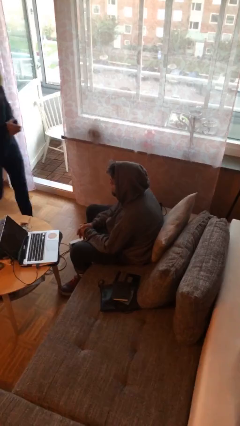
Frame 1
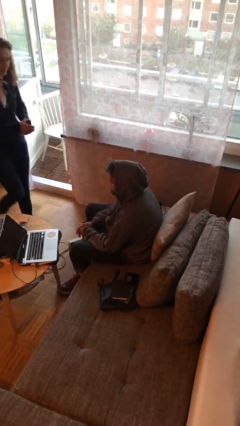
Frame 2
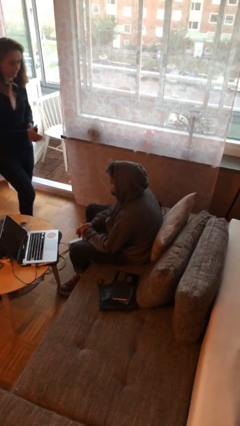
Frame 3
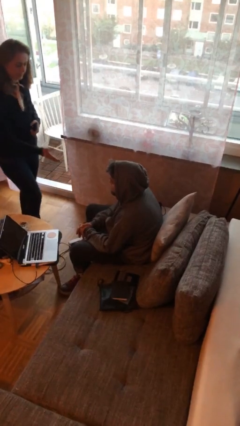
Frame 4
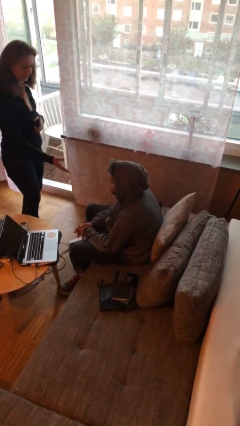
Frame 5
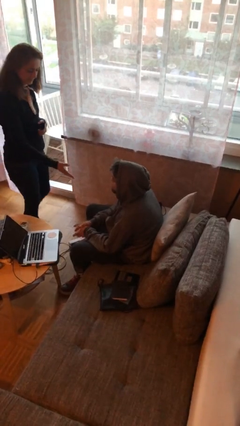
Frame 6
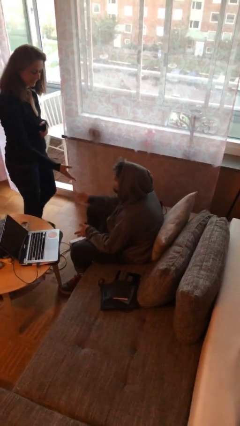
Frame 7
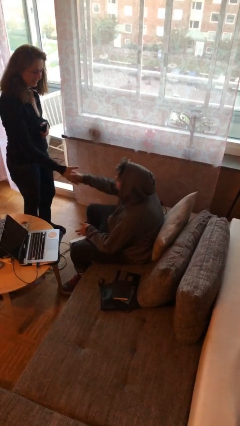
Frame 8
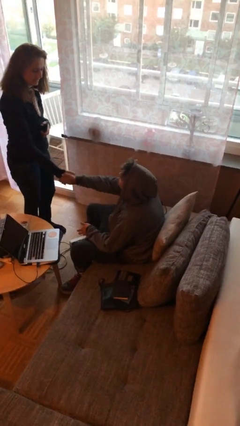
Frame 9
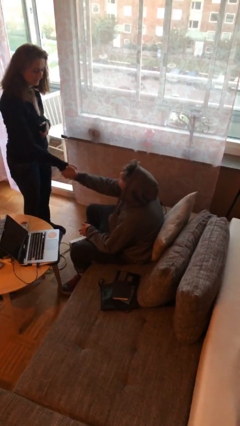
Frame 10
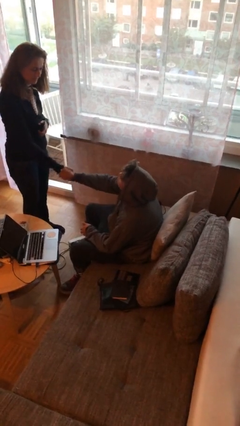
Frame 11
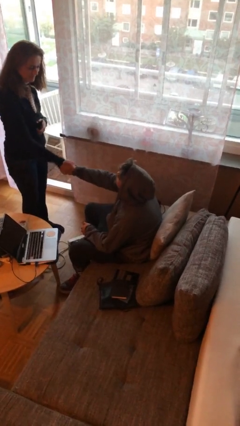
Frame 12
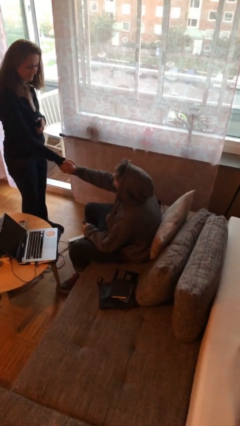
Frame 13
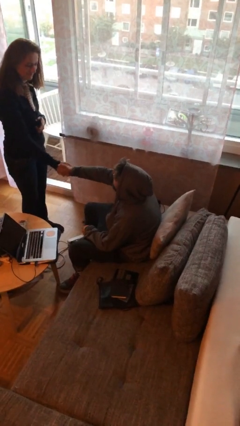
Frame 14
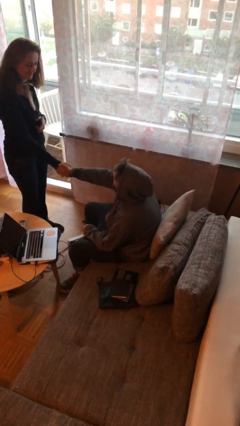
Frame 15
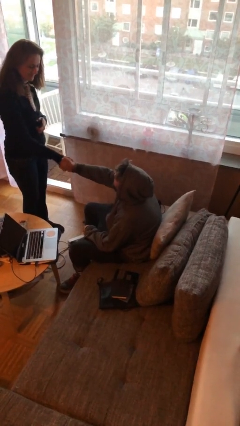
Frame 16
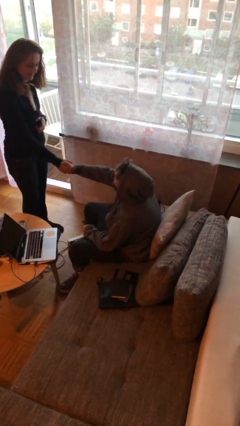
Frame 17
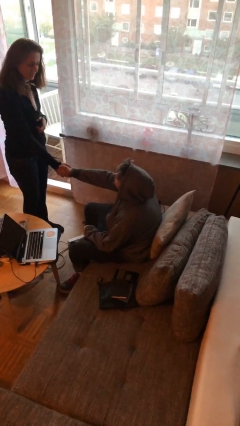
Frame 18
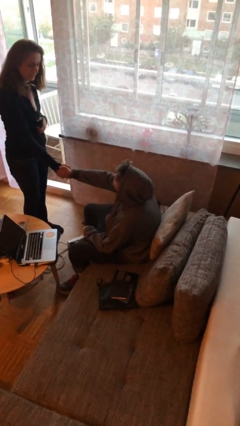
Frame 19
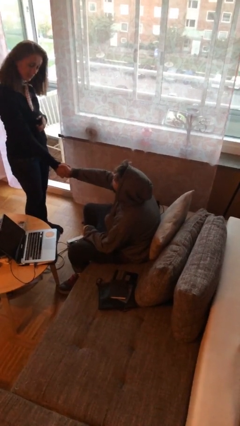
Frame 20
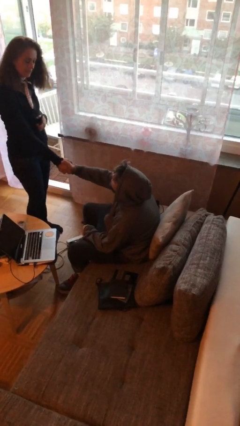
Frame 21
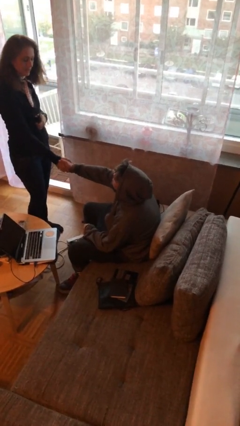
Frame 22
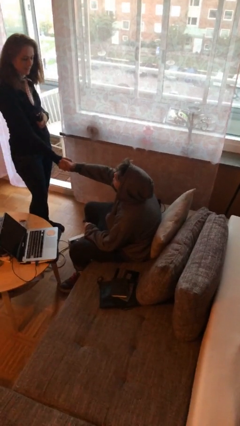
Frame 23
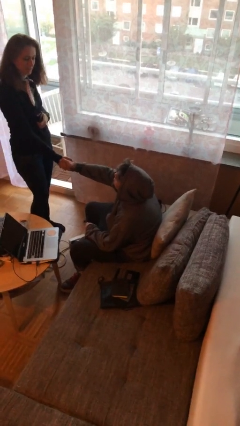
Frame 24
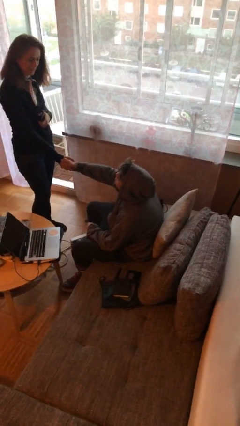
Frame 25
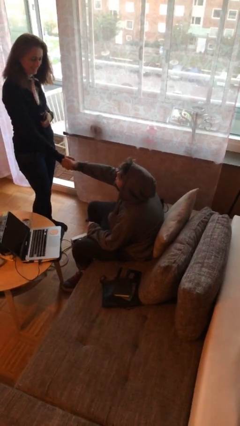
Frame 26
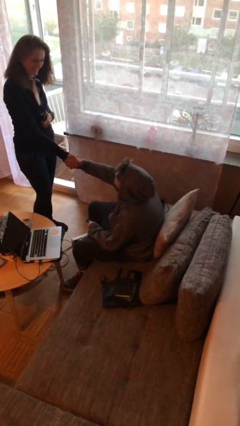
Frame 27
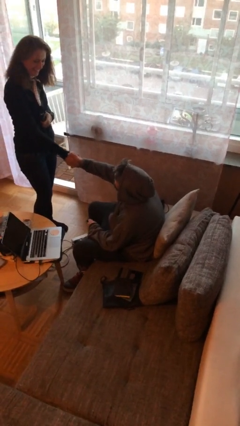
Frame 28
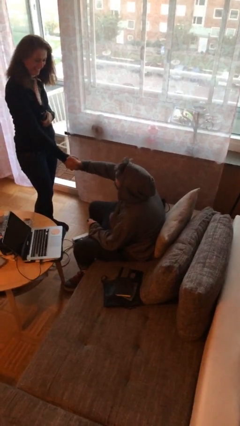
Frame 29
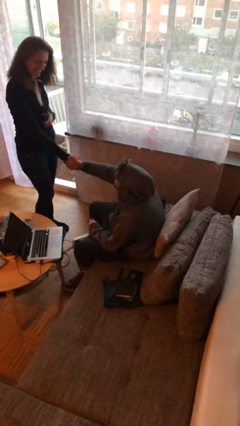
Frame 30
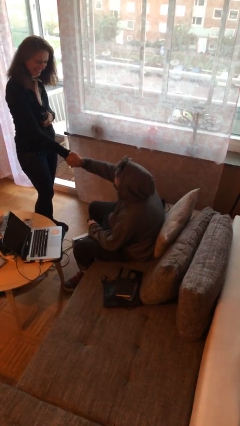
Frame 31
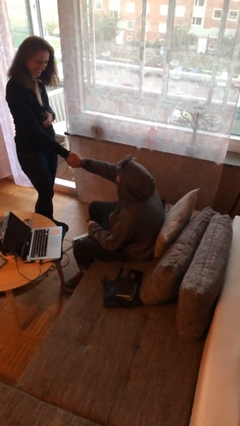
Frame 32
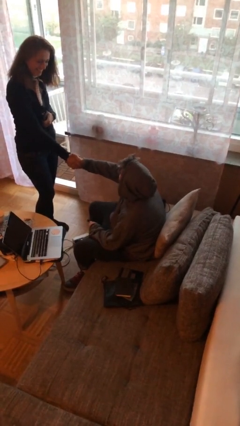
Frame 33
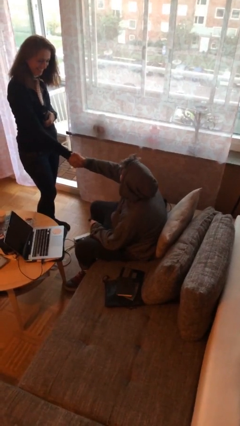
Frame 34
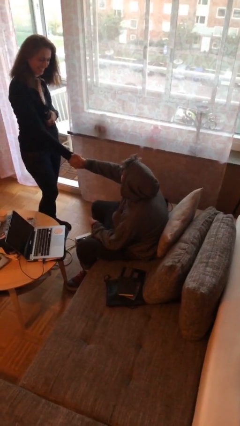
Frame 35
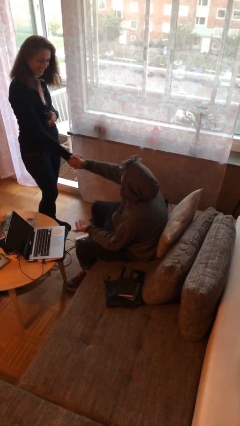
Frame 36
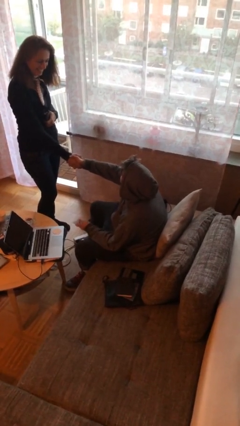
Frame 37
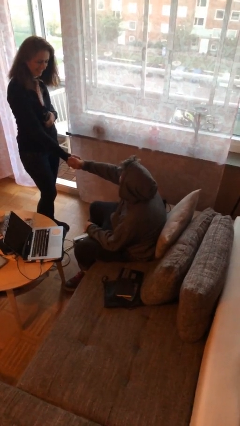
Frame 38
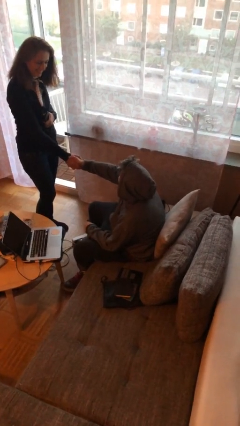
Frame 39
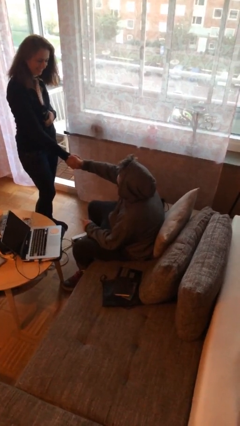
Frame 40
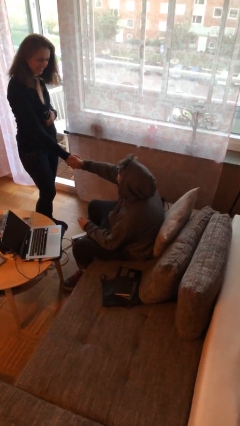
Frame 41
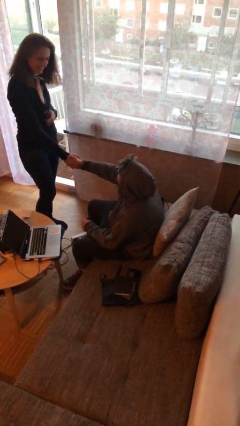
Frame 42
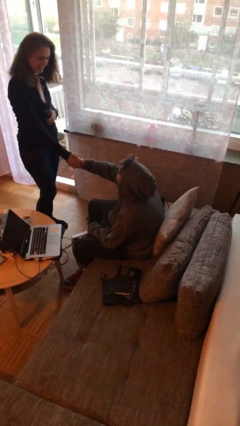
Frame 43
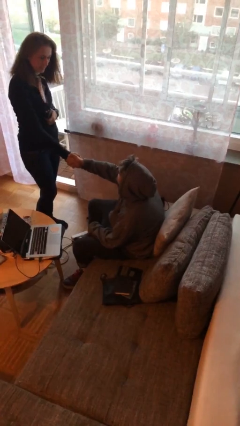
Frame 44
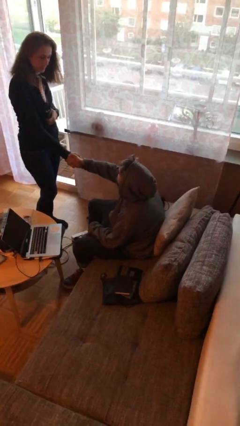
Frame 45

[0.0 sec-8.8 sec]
person shakes hand

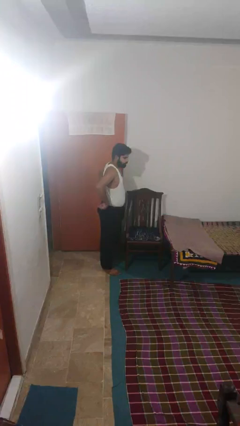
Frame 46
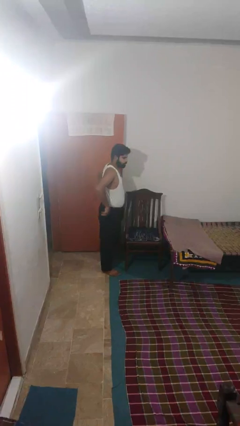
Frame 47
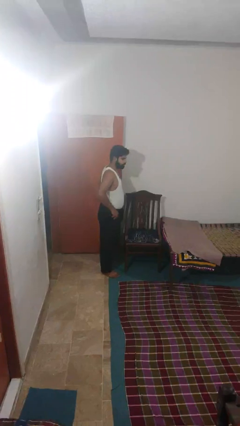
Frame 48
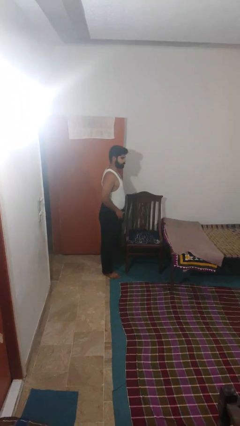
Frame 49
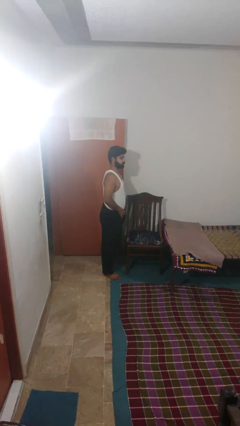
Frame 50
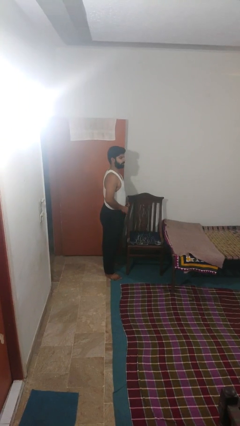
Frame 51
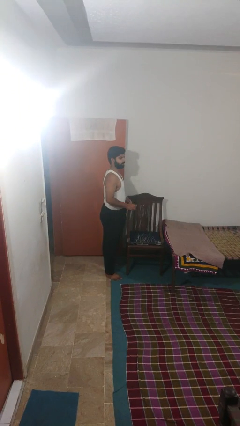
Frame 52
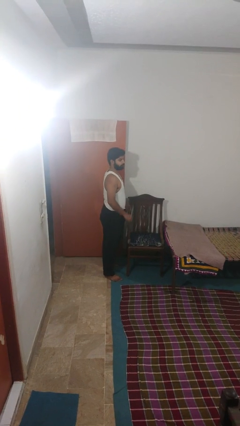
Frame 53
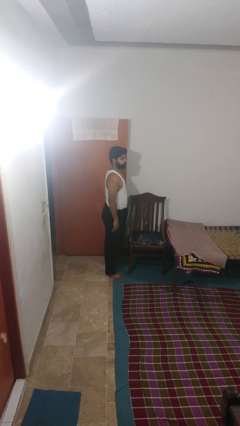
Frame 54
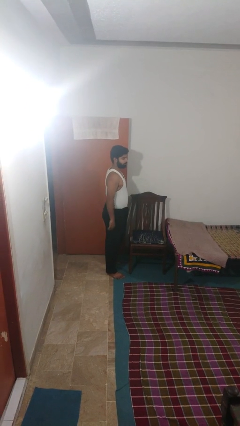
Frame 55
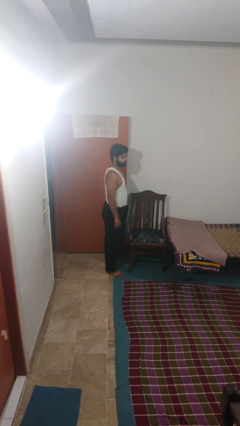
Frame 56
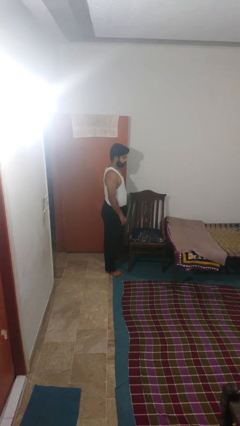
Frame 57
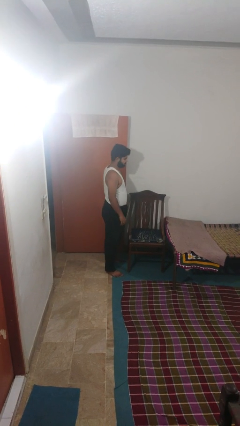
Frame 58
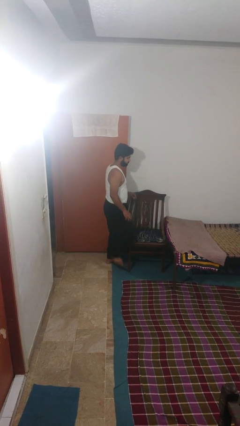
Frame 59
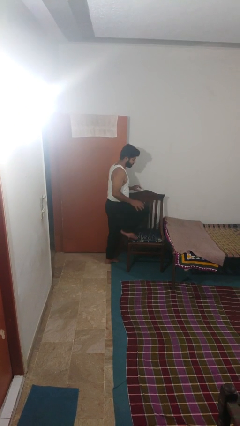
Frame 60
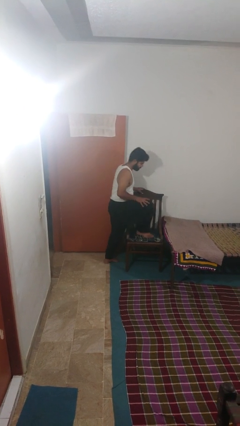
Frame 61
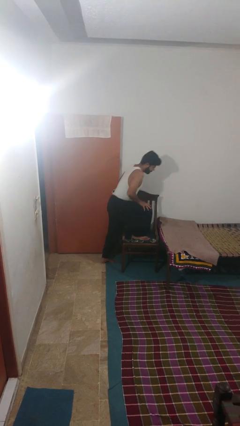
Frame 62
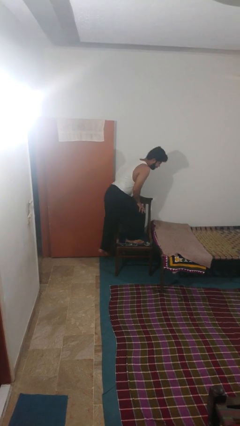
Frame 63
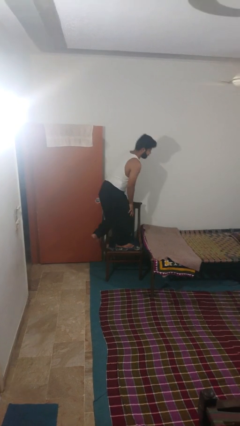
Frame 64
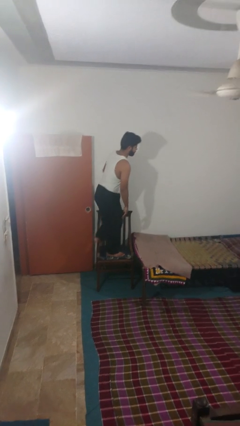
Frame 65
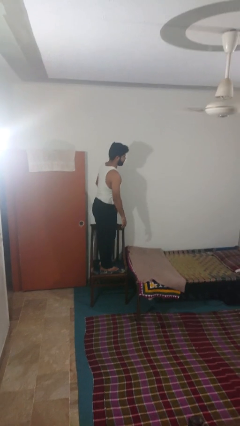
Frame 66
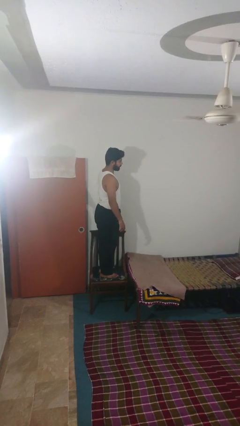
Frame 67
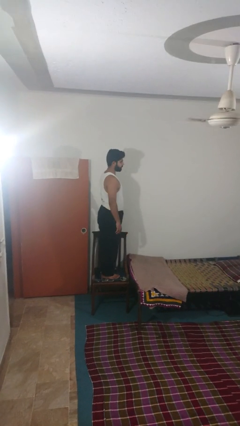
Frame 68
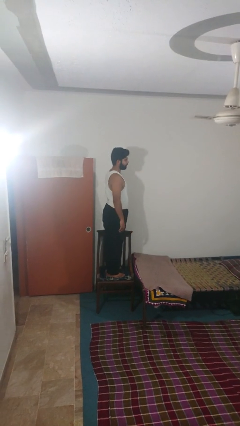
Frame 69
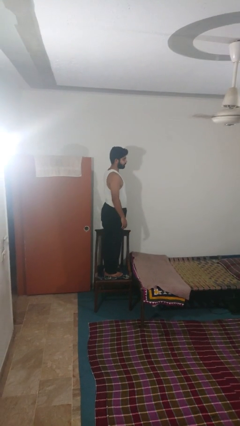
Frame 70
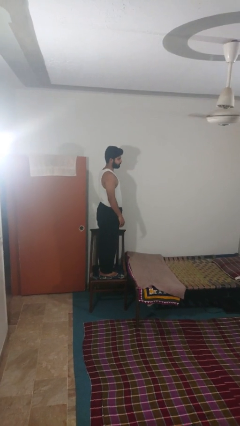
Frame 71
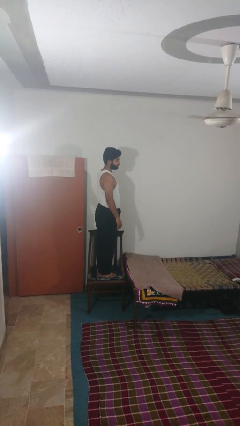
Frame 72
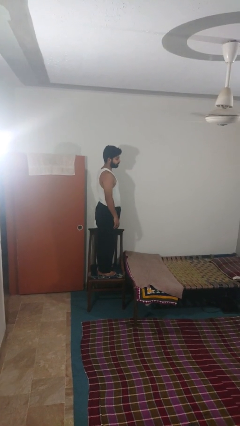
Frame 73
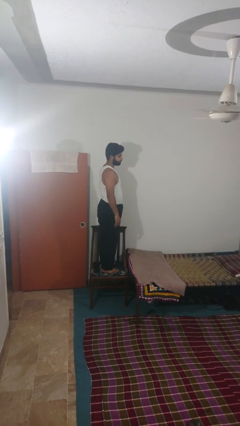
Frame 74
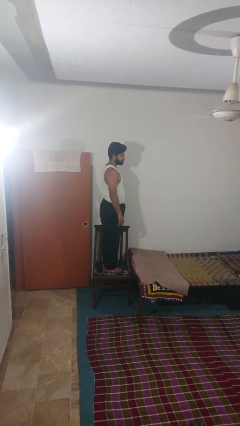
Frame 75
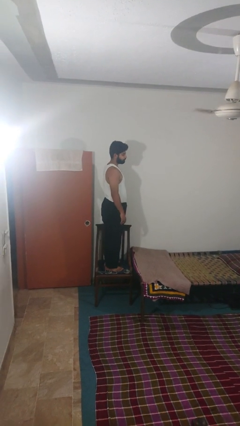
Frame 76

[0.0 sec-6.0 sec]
person climbs on chair

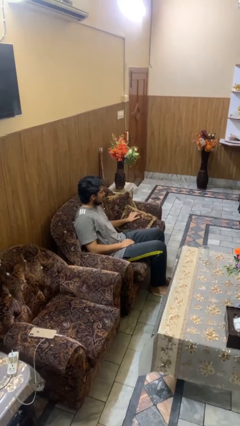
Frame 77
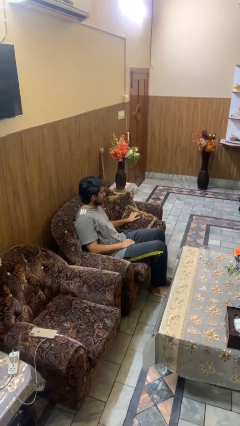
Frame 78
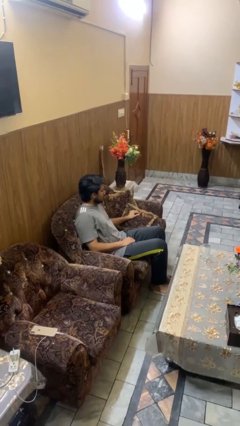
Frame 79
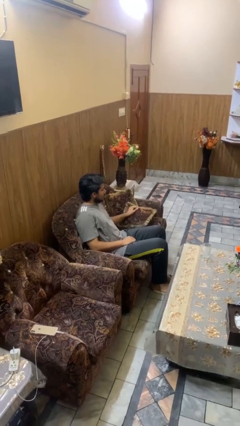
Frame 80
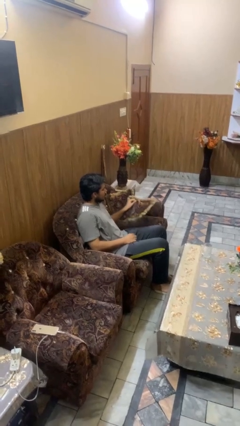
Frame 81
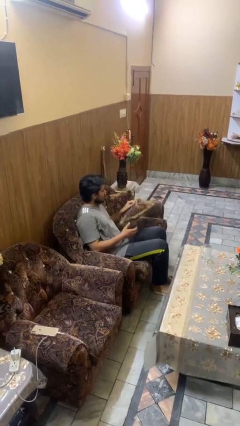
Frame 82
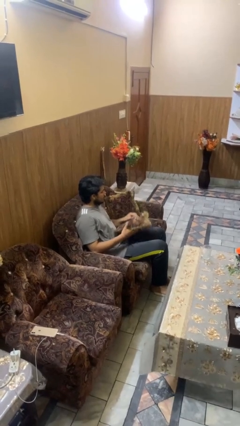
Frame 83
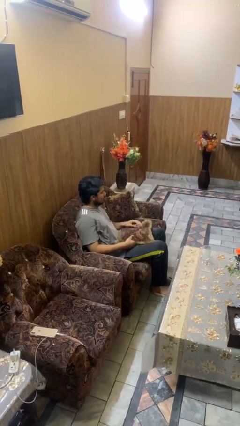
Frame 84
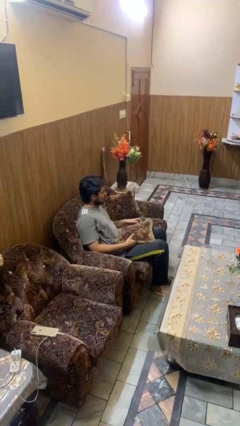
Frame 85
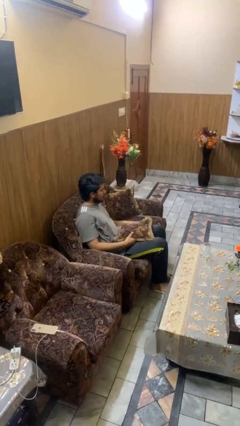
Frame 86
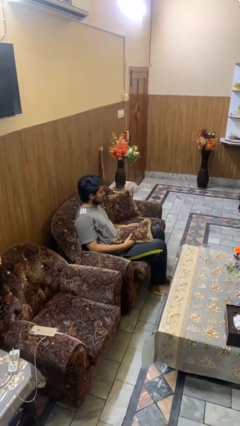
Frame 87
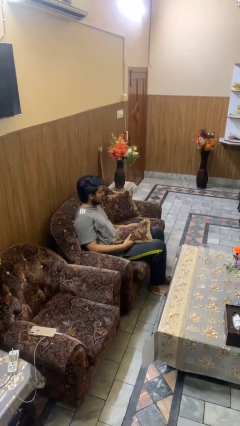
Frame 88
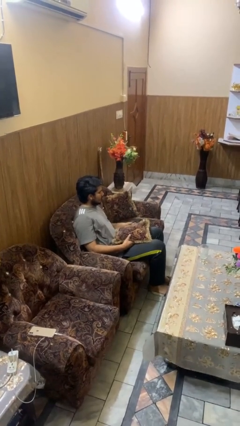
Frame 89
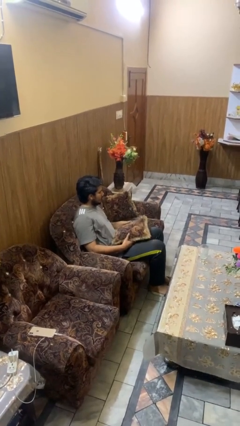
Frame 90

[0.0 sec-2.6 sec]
person picks up object from couch

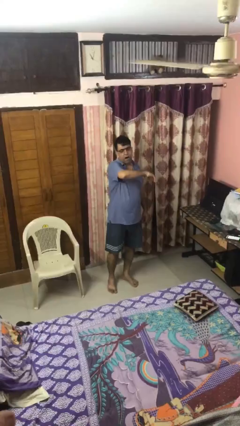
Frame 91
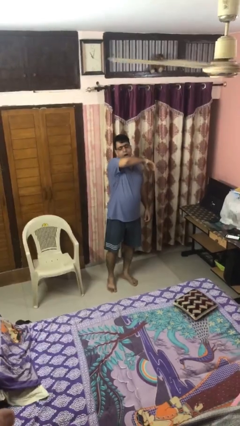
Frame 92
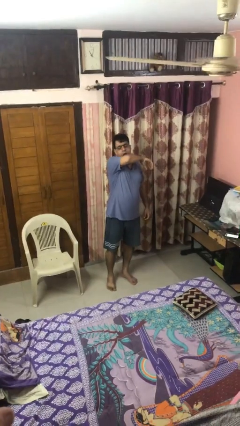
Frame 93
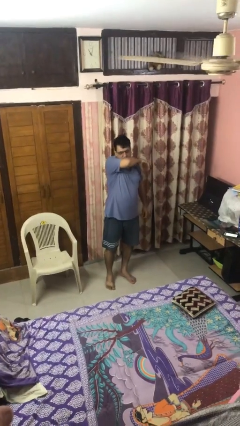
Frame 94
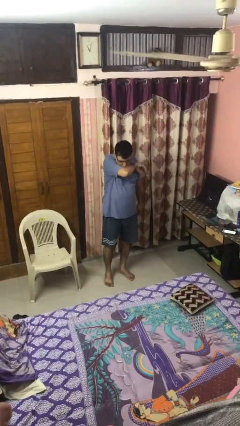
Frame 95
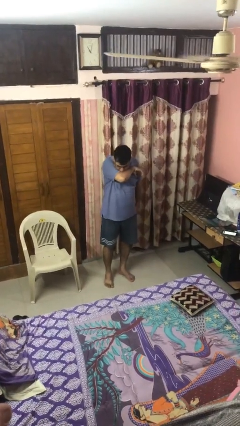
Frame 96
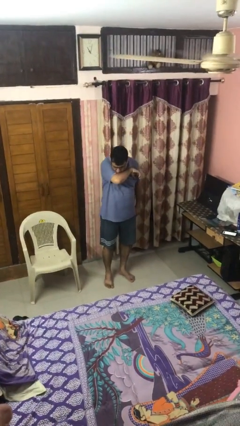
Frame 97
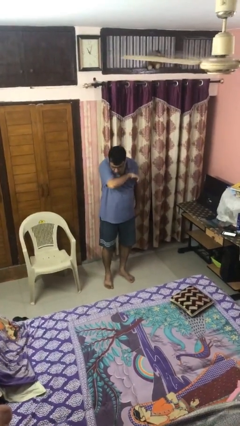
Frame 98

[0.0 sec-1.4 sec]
person sneezes into arm
